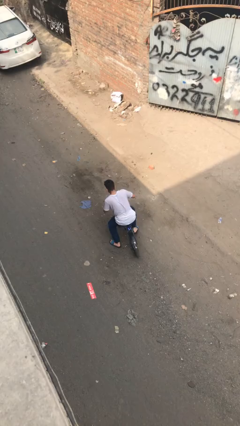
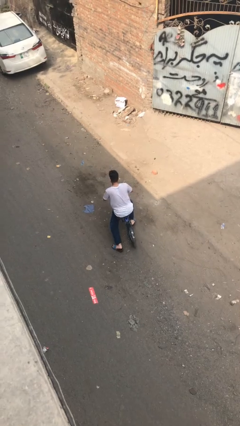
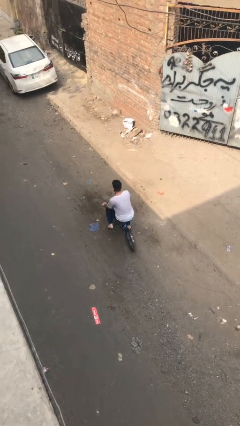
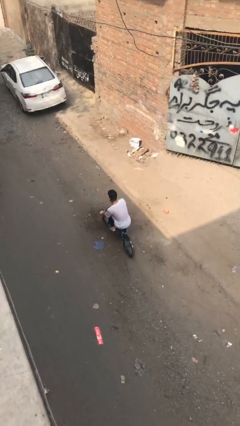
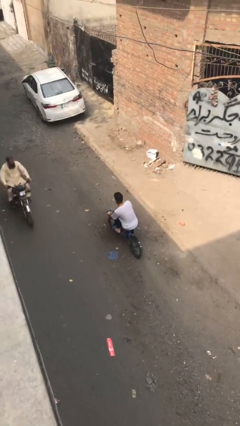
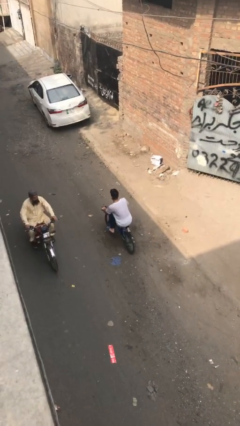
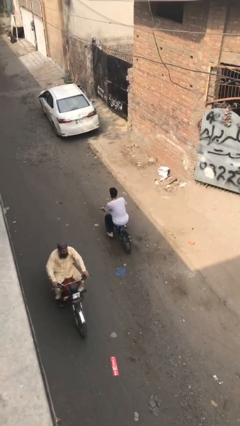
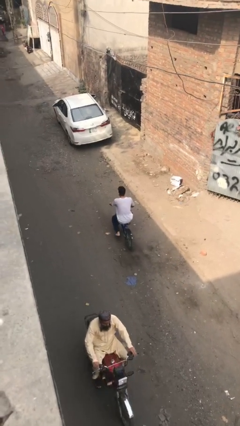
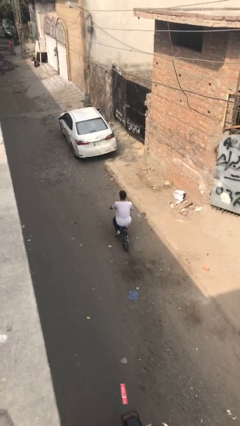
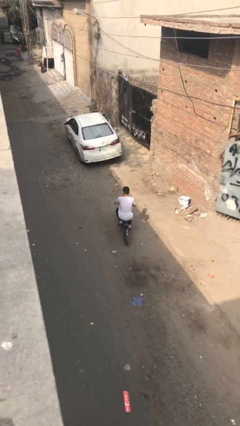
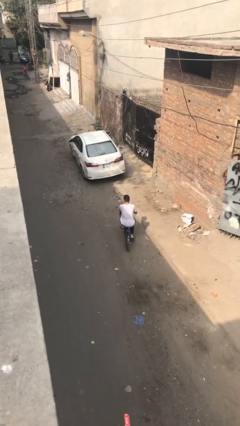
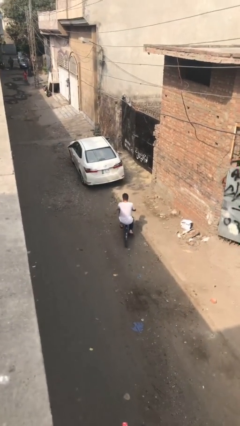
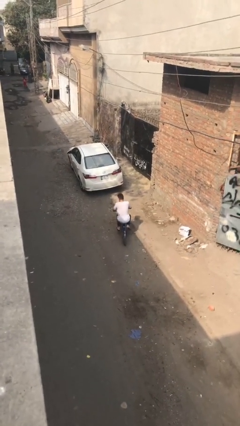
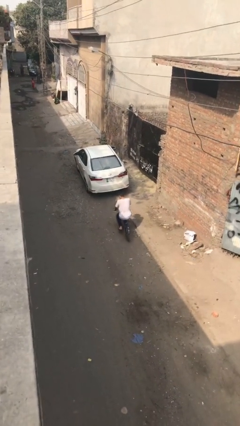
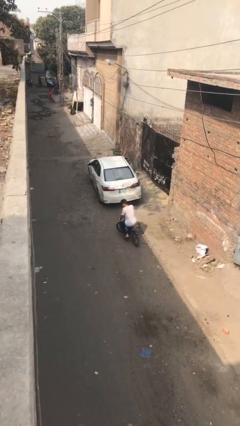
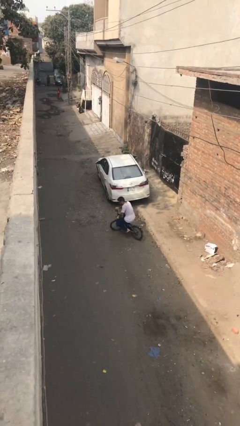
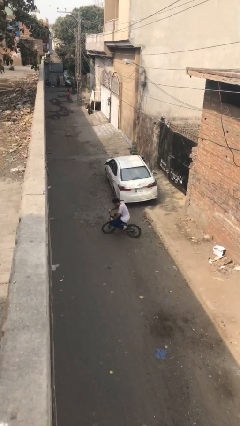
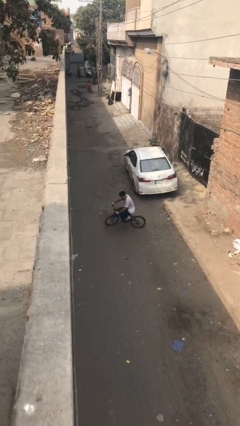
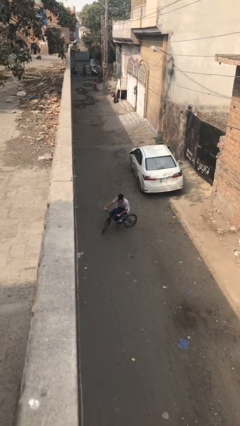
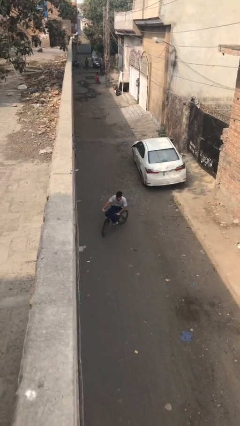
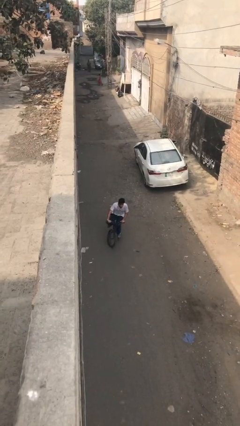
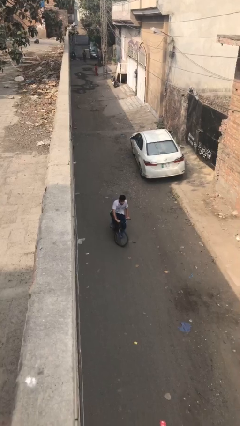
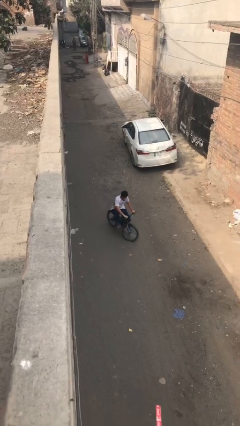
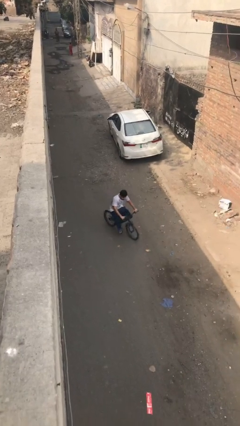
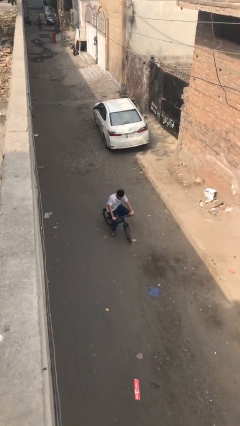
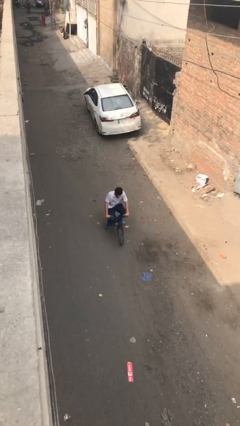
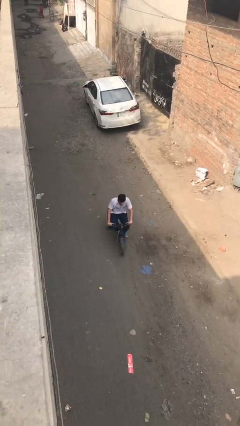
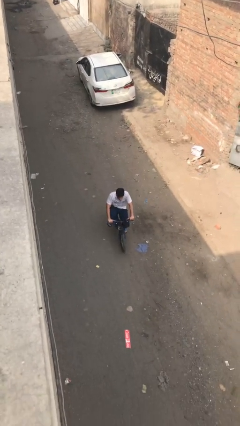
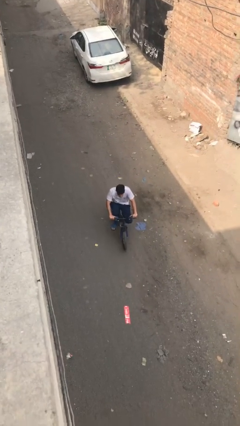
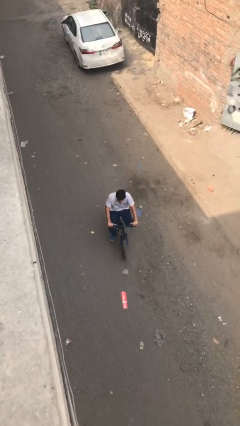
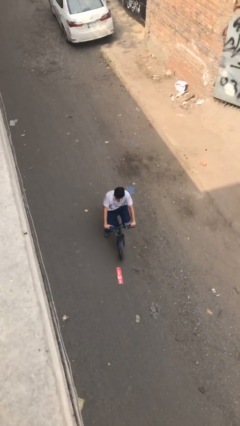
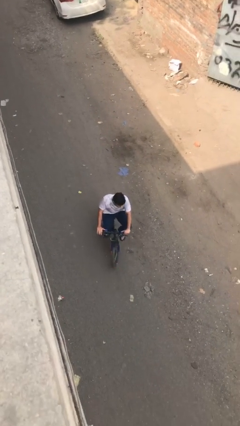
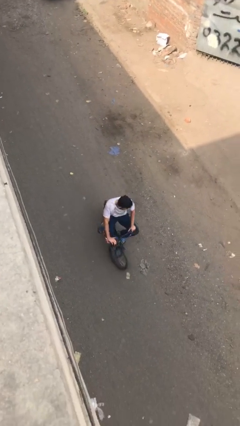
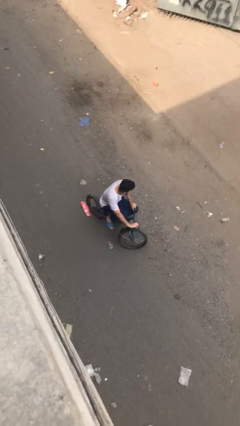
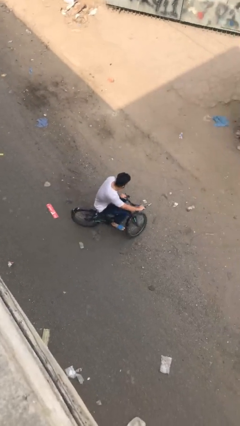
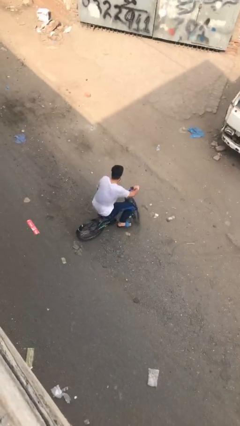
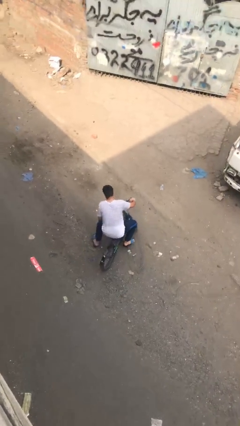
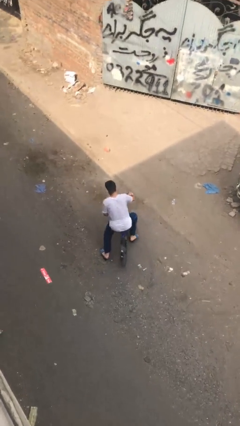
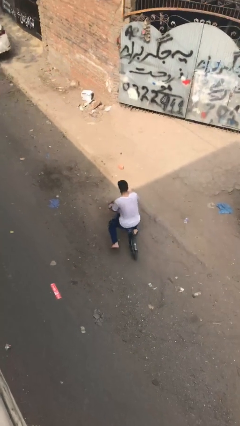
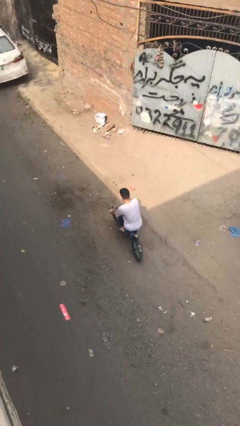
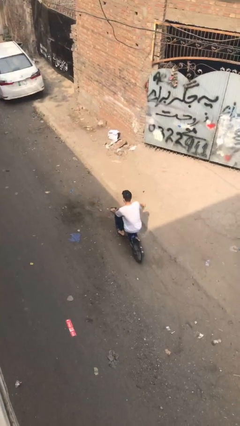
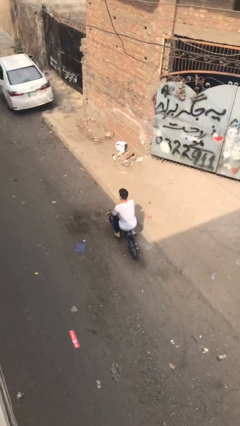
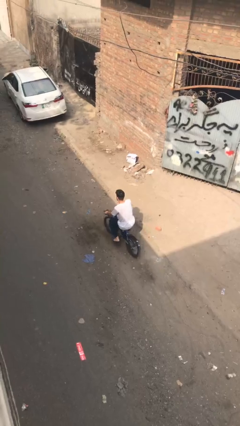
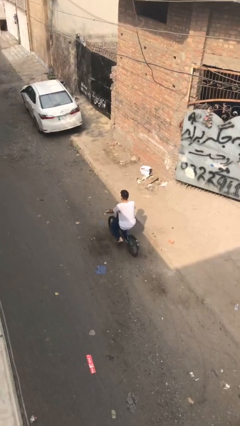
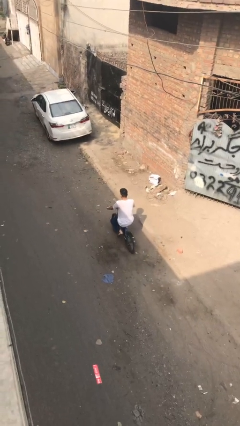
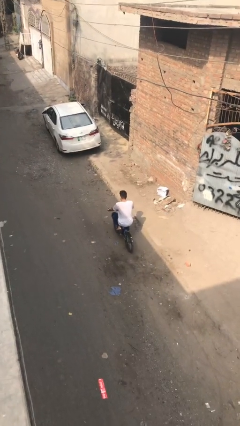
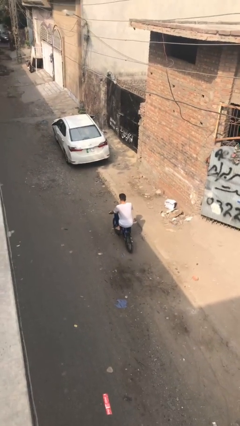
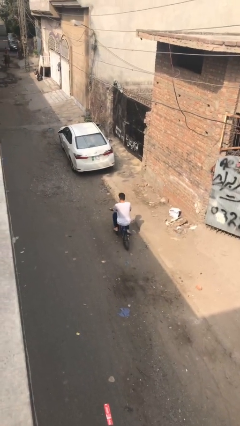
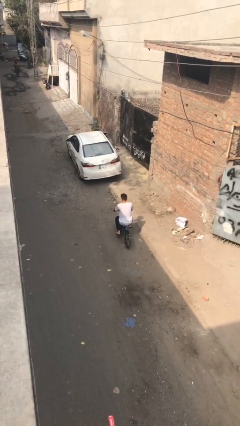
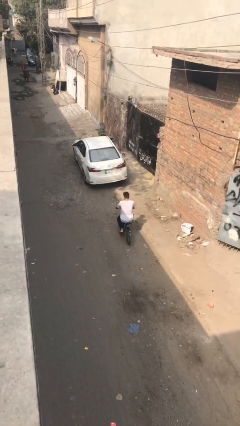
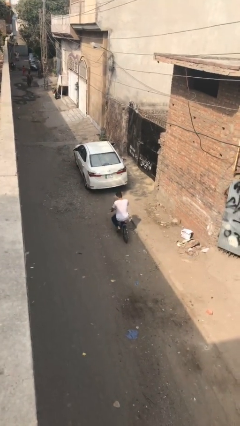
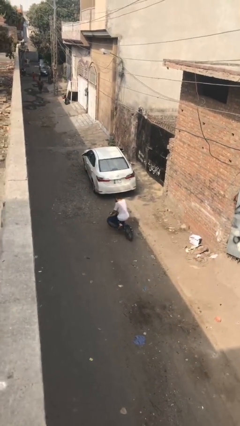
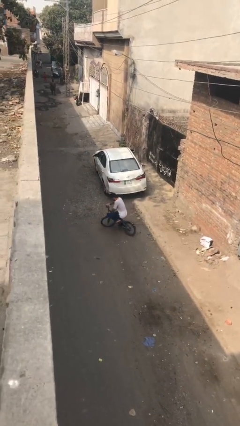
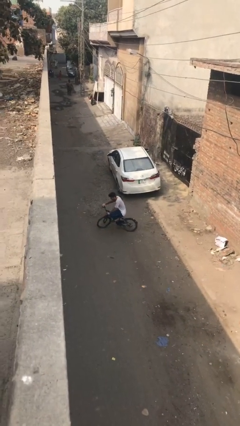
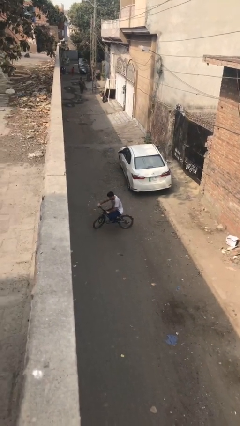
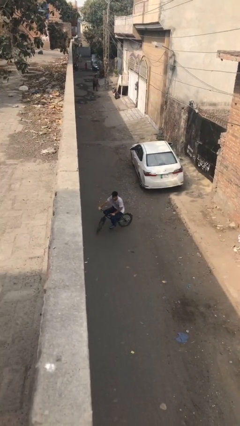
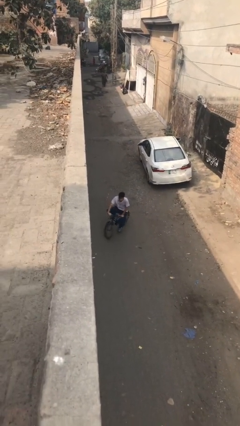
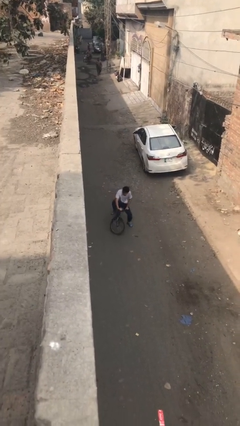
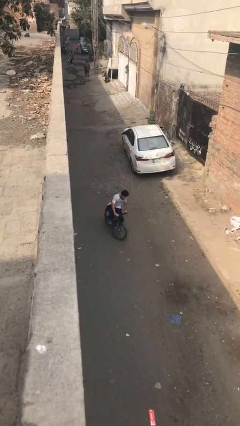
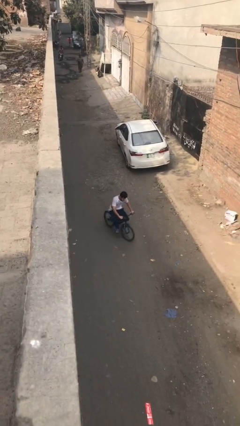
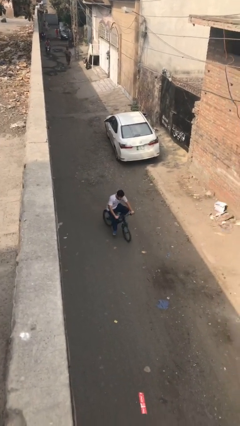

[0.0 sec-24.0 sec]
person rides bicycle

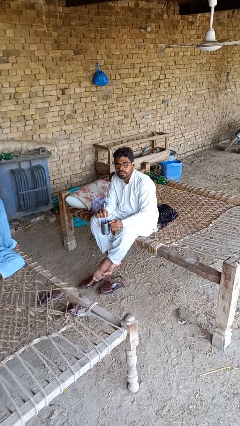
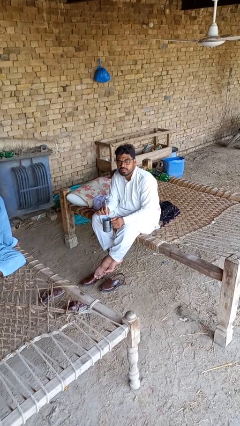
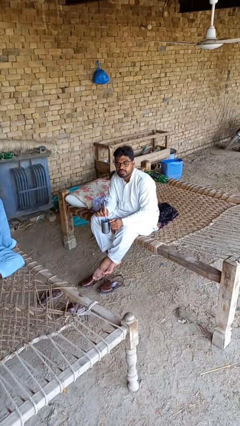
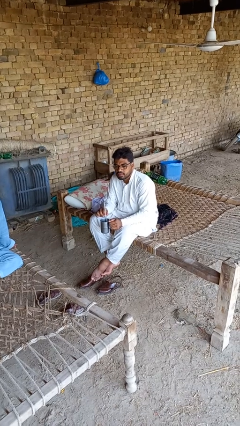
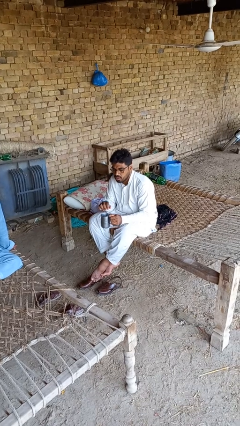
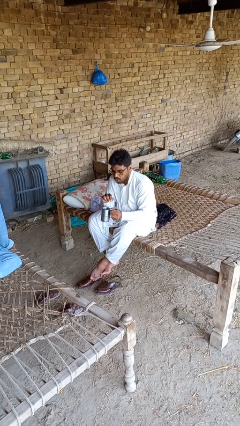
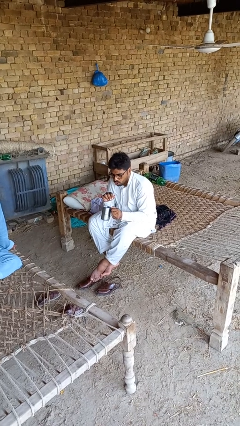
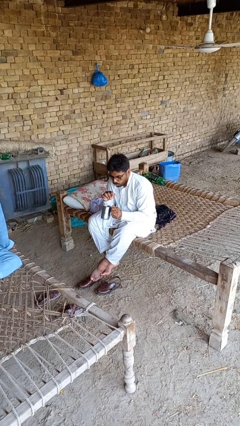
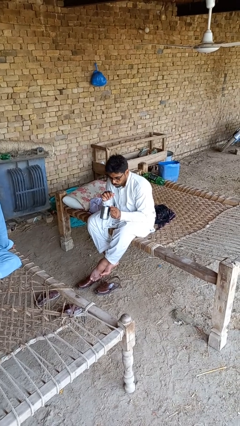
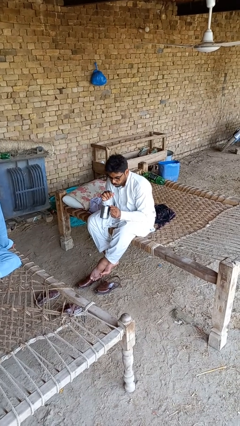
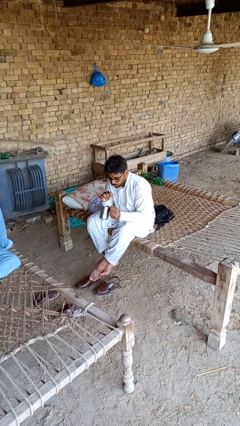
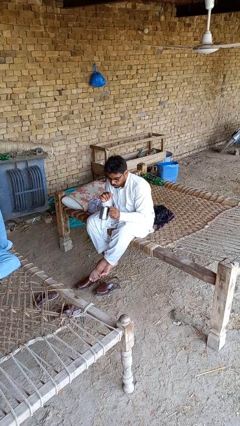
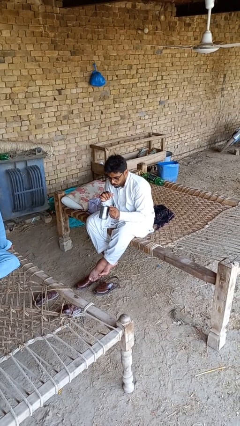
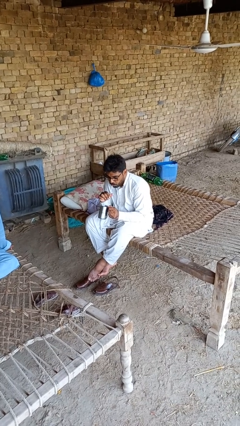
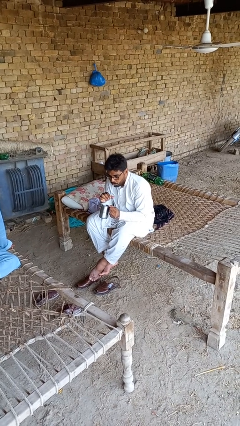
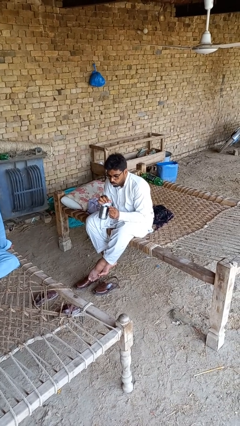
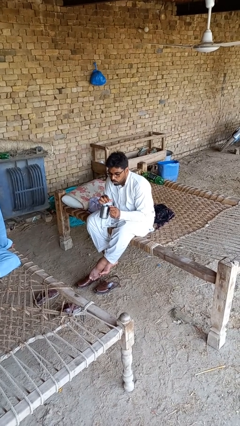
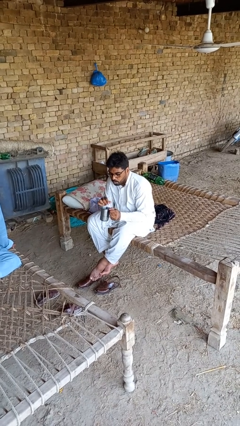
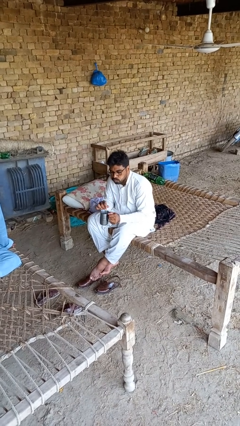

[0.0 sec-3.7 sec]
person drinks from straw

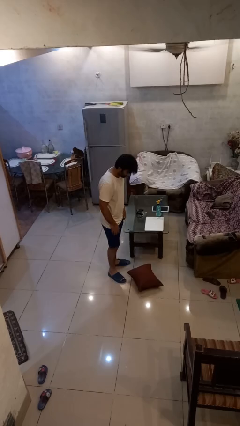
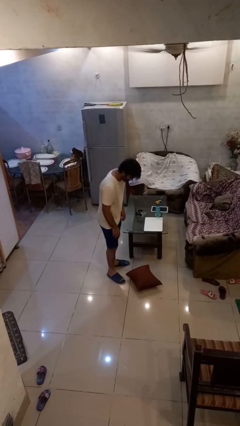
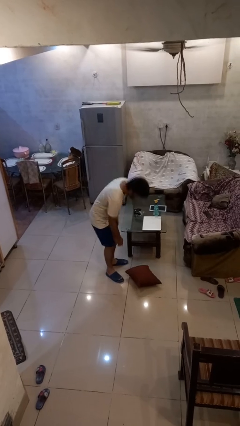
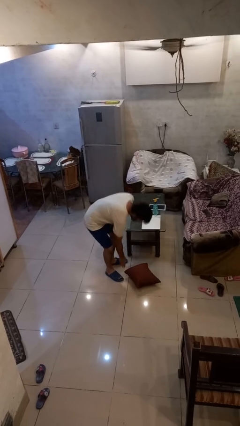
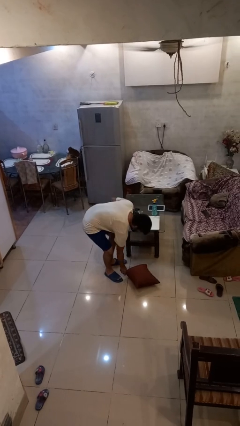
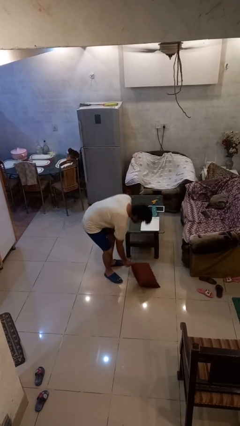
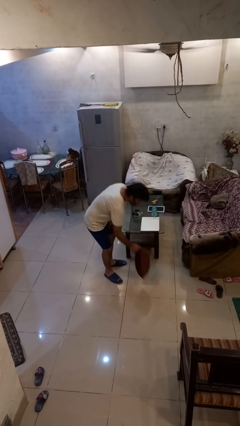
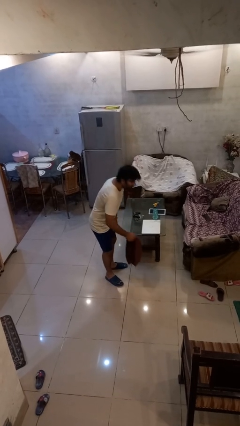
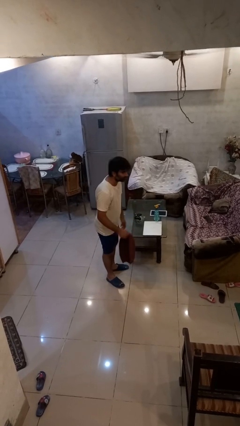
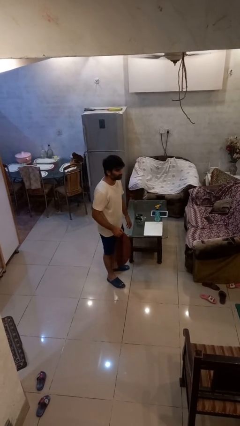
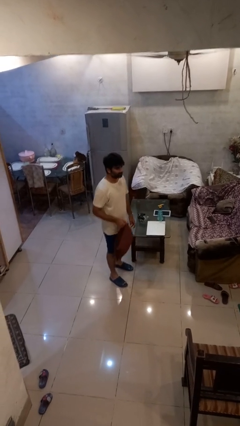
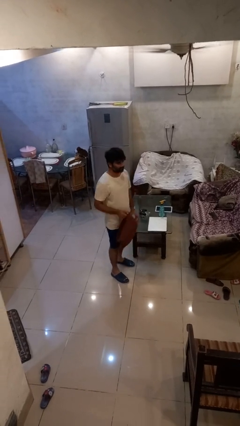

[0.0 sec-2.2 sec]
person picks up object from floor

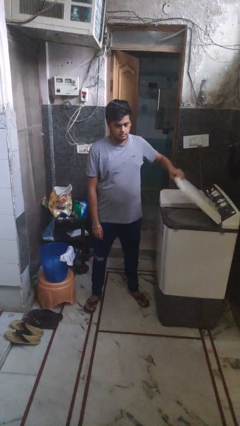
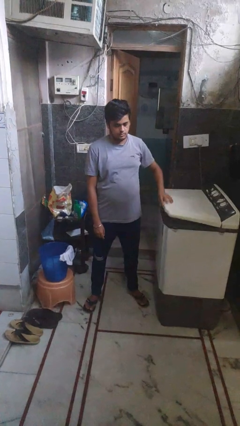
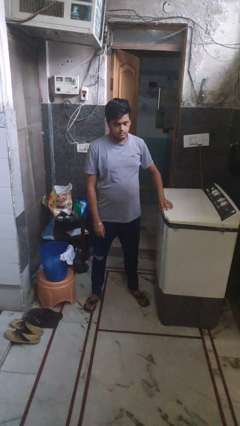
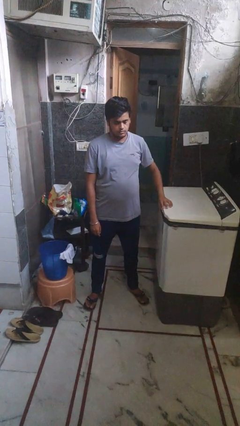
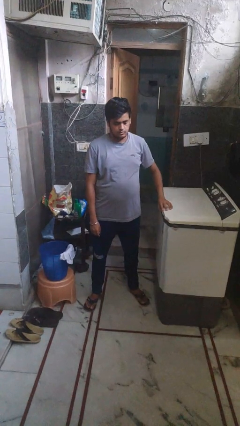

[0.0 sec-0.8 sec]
person closes clothes washer
